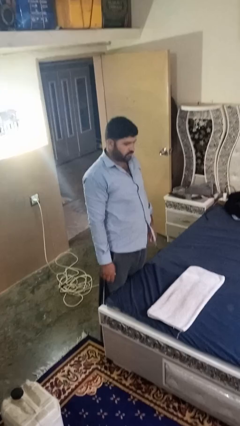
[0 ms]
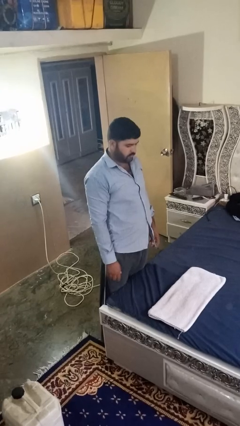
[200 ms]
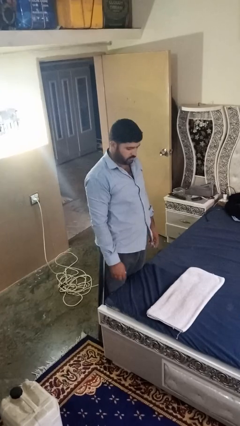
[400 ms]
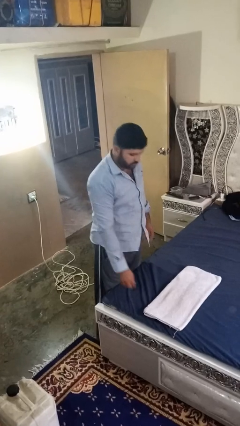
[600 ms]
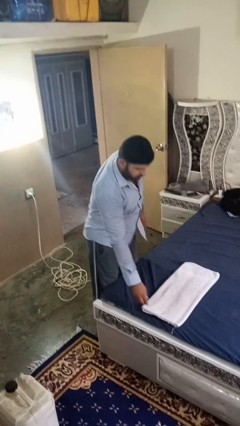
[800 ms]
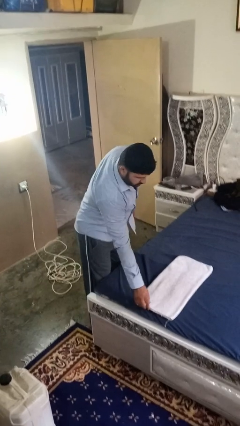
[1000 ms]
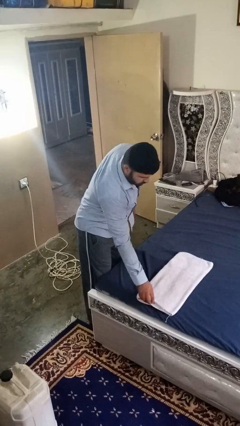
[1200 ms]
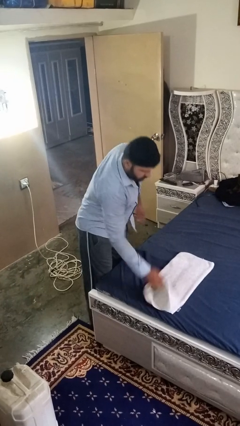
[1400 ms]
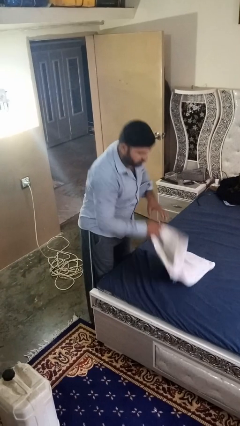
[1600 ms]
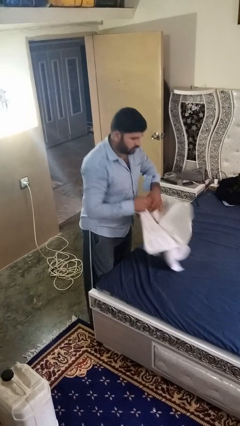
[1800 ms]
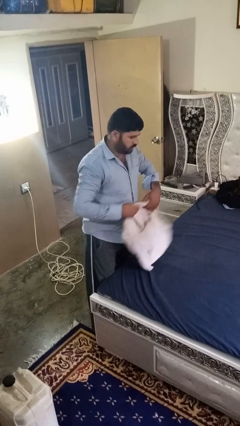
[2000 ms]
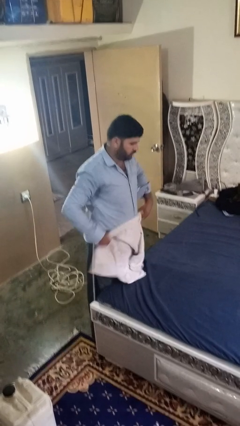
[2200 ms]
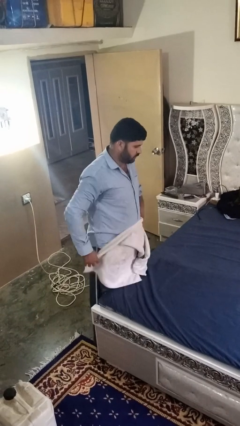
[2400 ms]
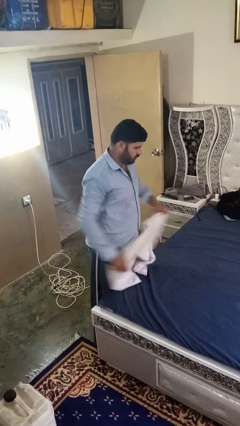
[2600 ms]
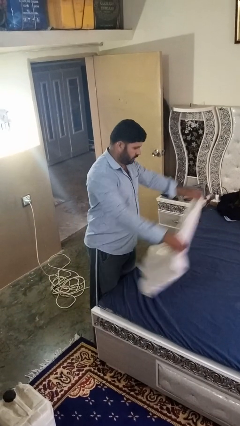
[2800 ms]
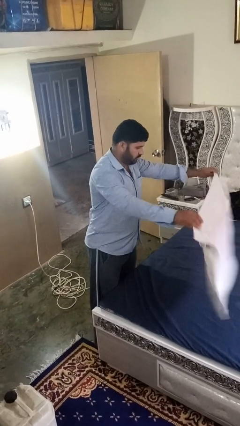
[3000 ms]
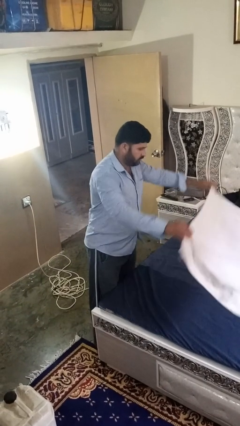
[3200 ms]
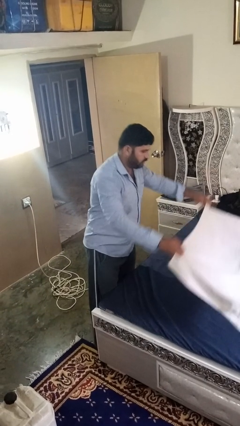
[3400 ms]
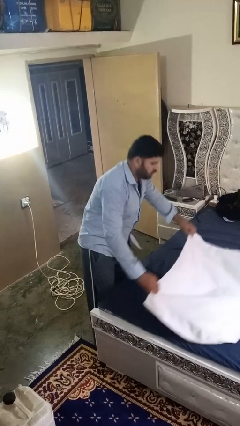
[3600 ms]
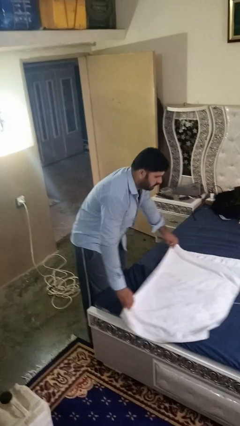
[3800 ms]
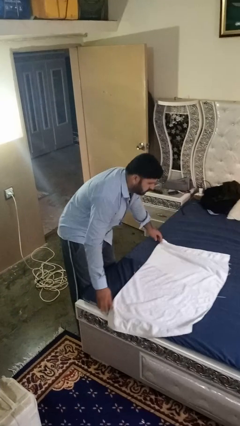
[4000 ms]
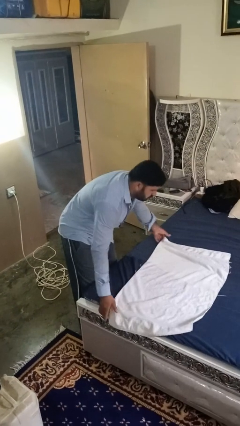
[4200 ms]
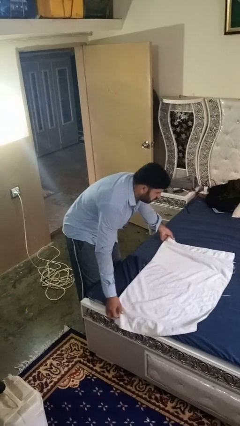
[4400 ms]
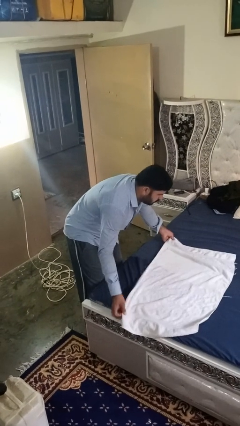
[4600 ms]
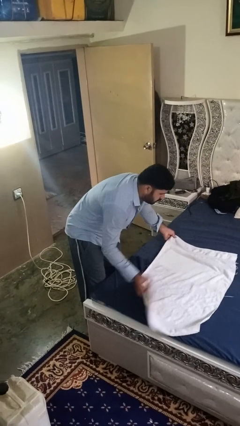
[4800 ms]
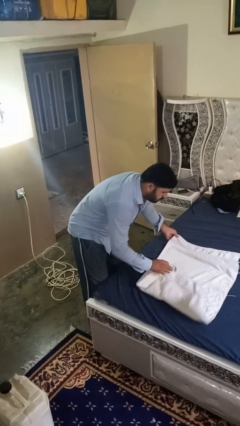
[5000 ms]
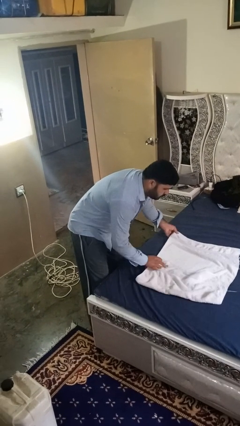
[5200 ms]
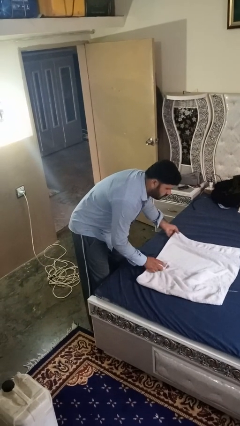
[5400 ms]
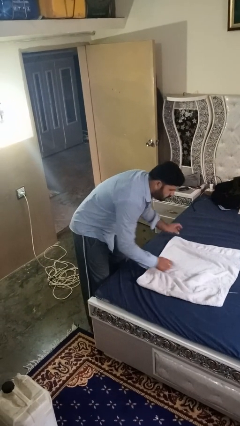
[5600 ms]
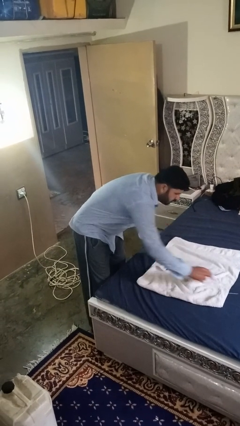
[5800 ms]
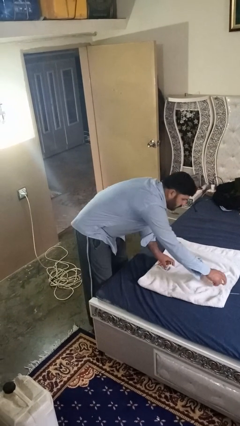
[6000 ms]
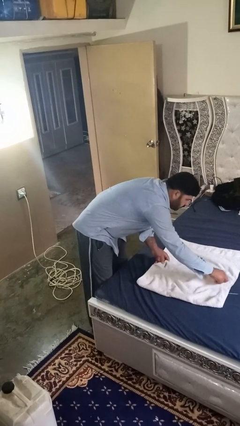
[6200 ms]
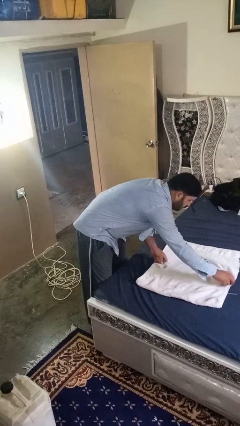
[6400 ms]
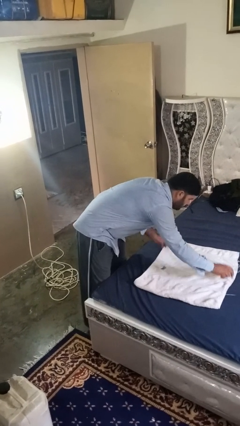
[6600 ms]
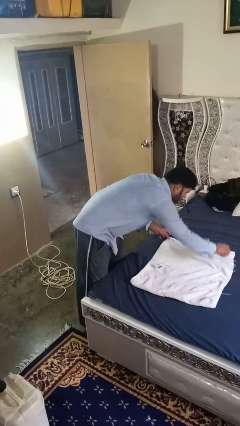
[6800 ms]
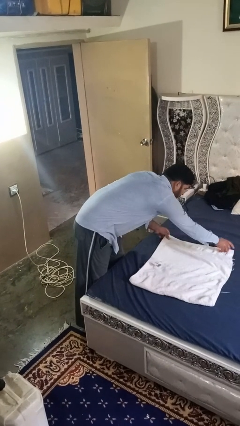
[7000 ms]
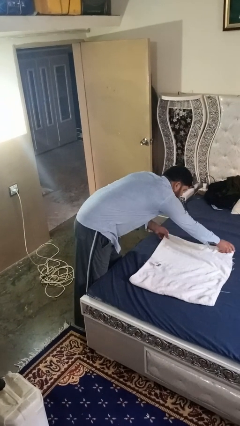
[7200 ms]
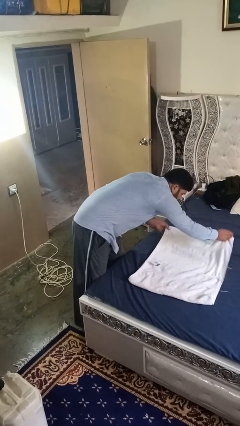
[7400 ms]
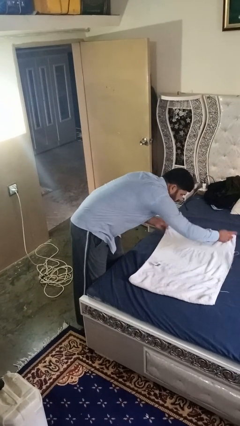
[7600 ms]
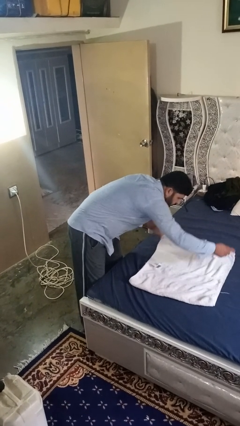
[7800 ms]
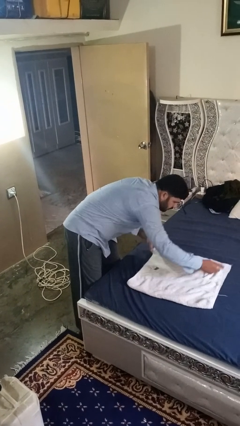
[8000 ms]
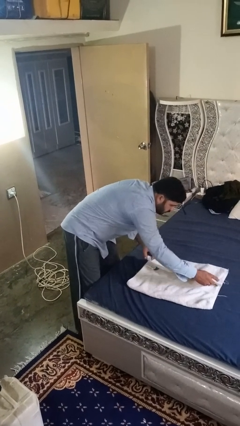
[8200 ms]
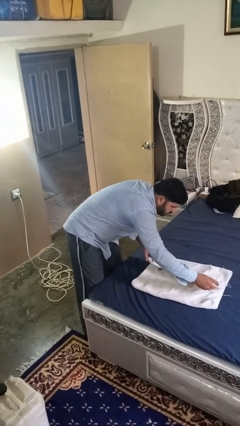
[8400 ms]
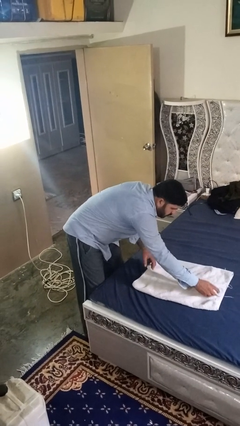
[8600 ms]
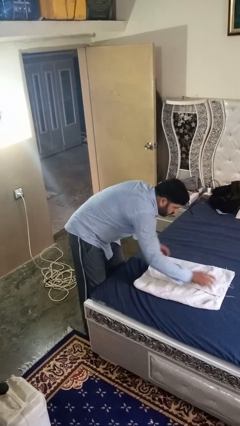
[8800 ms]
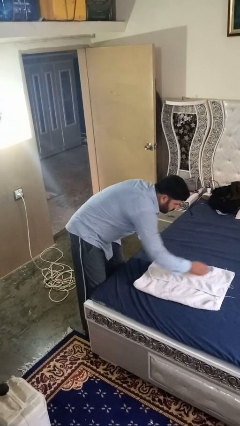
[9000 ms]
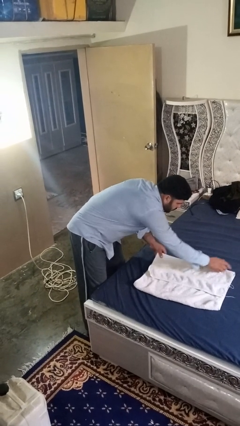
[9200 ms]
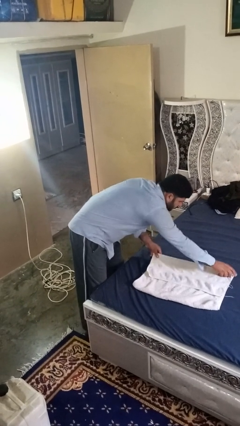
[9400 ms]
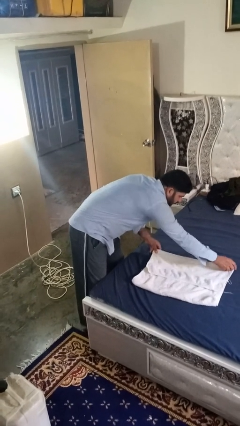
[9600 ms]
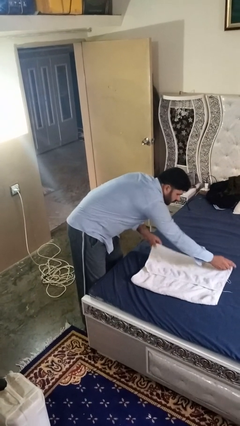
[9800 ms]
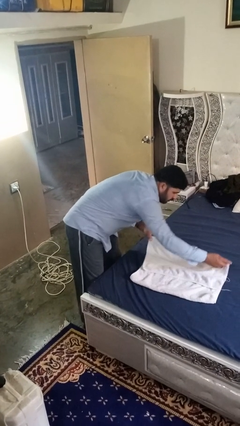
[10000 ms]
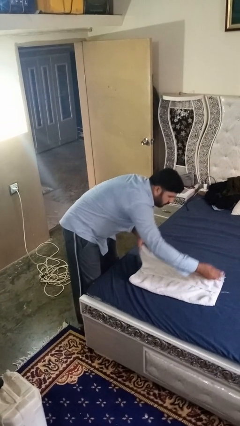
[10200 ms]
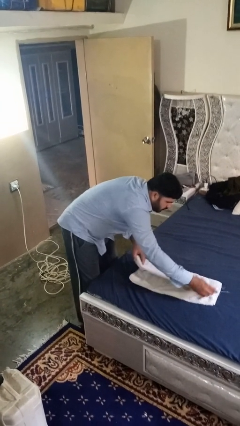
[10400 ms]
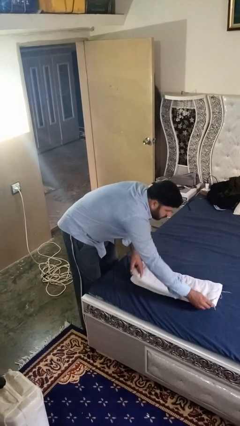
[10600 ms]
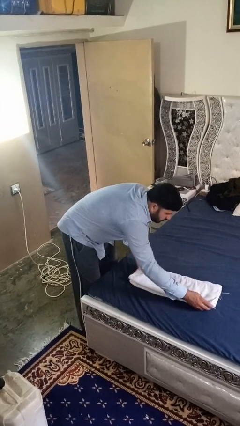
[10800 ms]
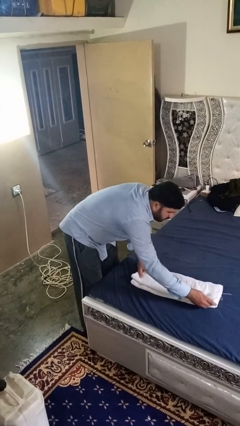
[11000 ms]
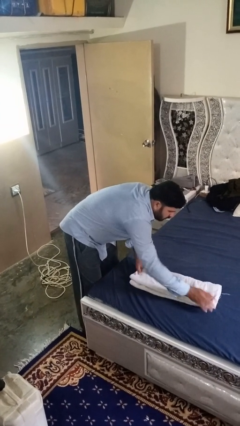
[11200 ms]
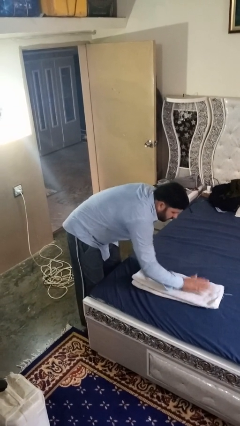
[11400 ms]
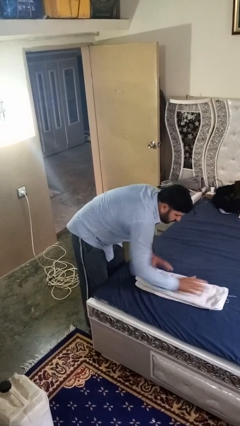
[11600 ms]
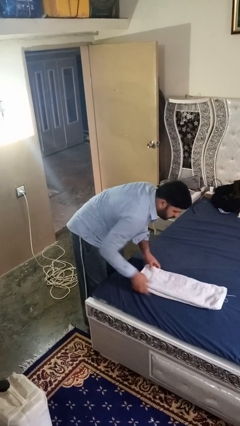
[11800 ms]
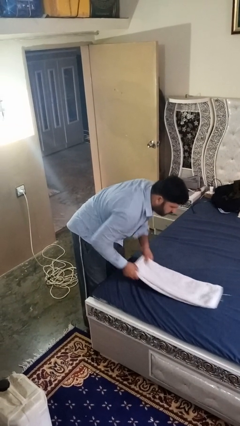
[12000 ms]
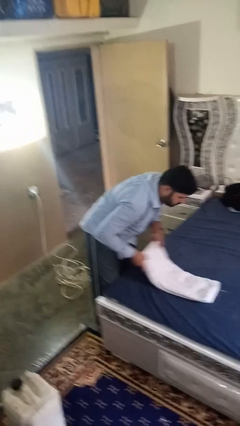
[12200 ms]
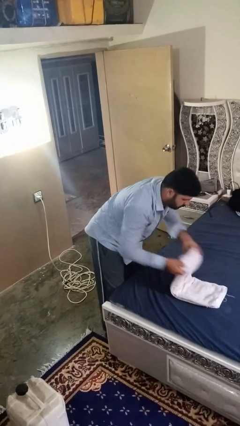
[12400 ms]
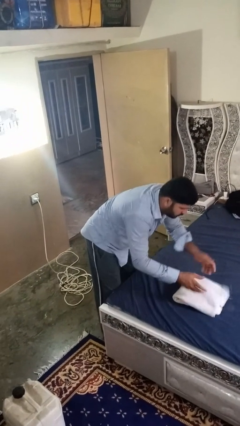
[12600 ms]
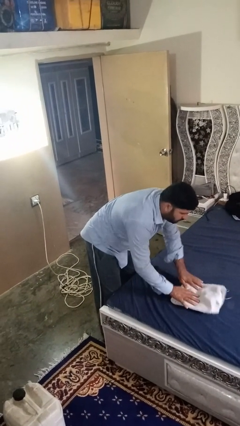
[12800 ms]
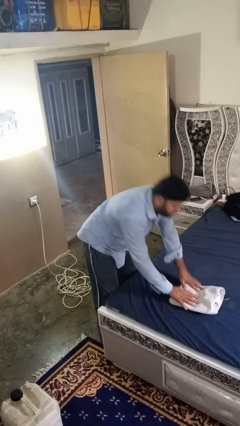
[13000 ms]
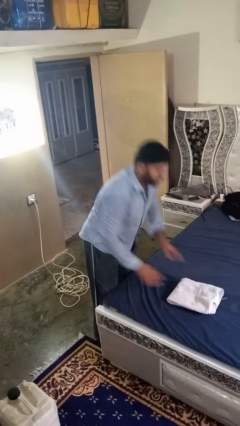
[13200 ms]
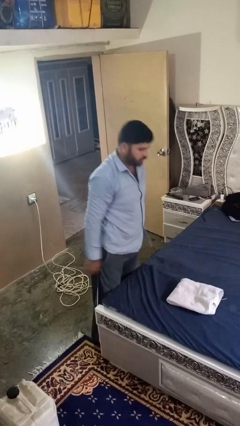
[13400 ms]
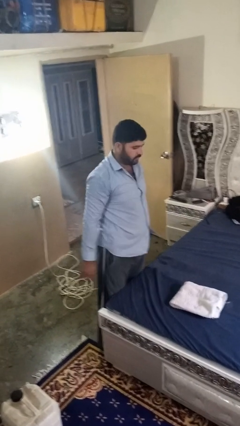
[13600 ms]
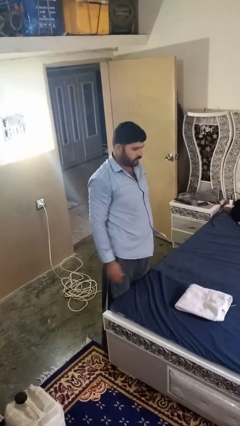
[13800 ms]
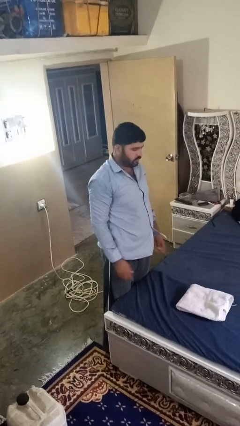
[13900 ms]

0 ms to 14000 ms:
person folds towel

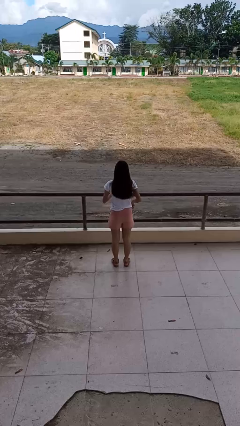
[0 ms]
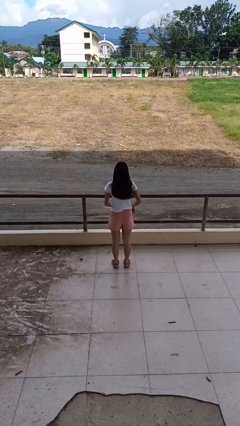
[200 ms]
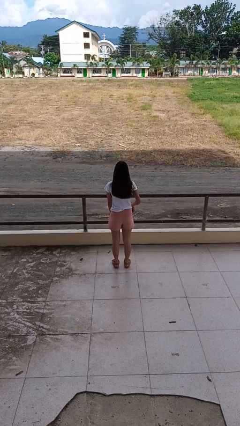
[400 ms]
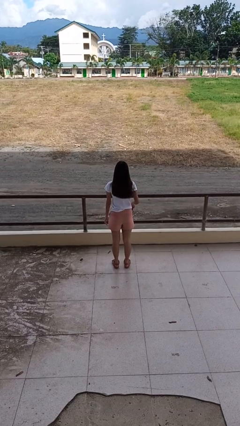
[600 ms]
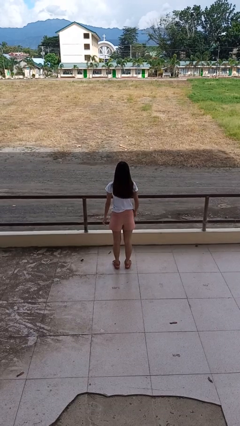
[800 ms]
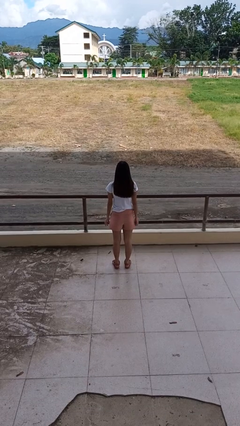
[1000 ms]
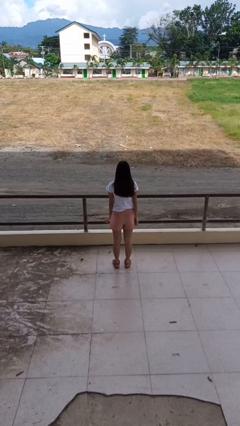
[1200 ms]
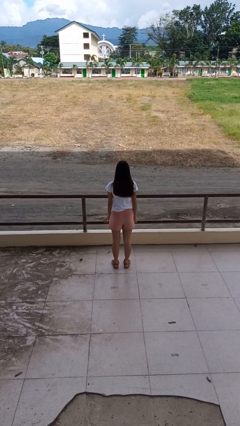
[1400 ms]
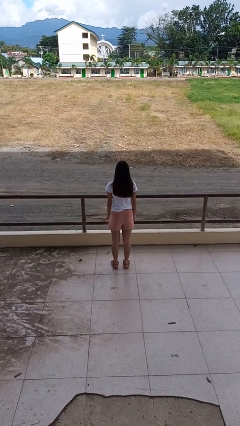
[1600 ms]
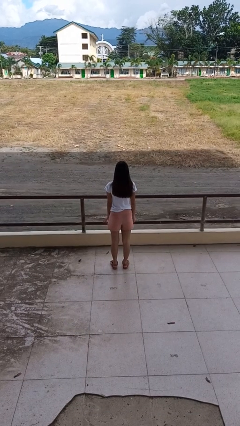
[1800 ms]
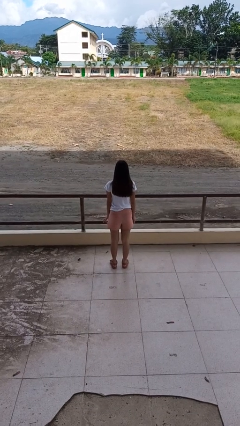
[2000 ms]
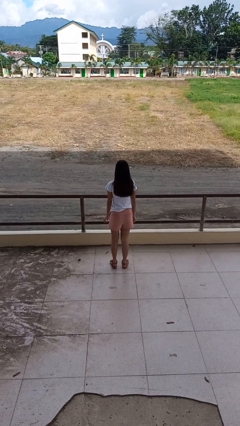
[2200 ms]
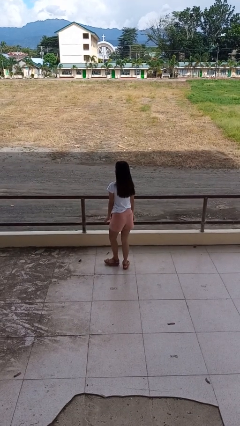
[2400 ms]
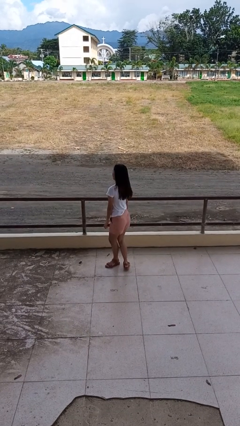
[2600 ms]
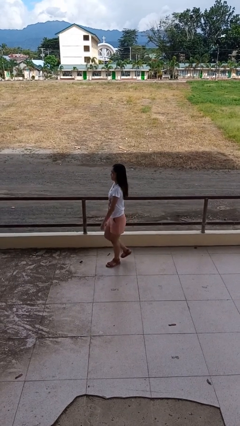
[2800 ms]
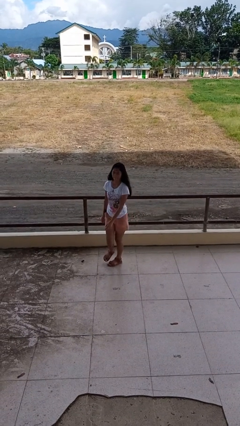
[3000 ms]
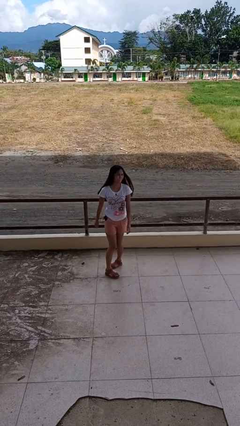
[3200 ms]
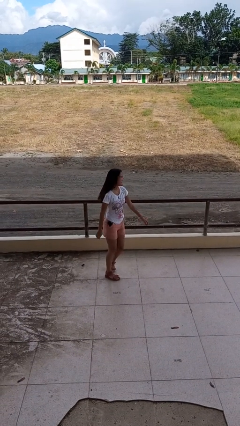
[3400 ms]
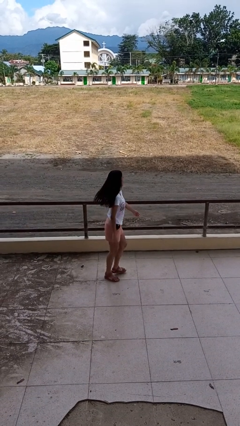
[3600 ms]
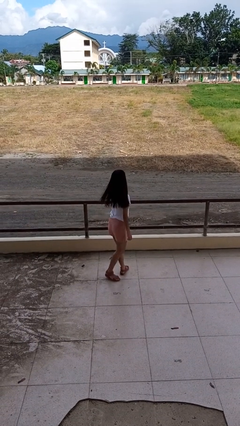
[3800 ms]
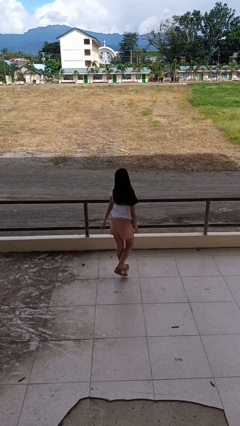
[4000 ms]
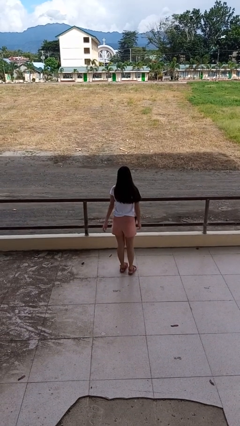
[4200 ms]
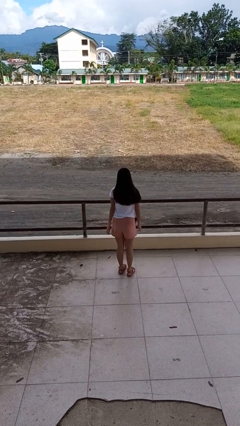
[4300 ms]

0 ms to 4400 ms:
person twirls
